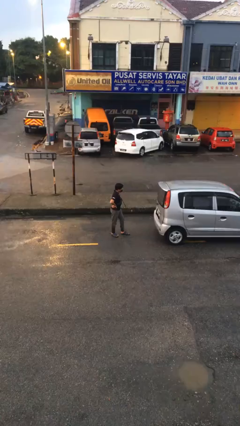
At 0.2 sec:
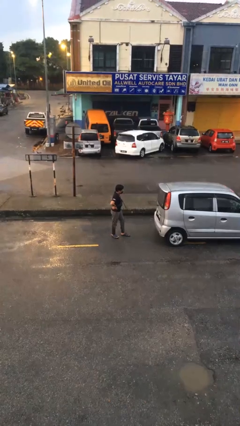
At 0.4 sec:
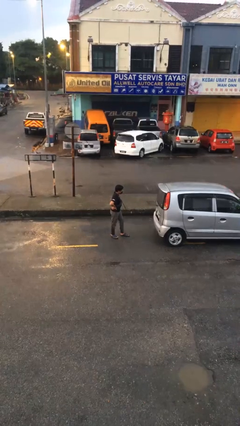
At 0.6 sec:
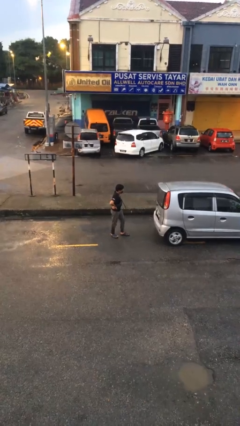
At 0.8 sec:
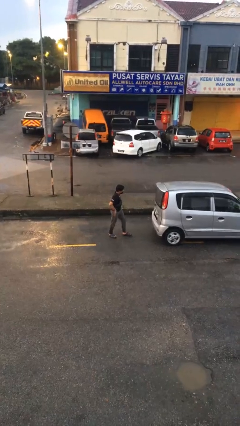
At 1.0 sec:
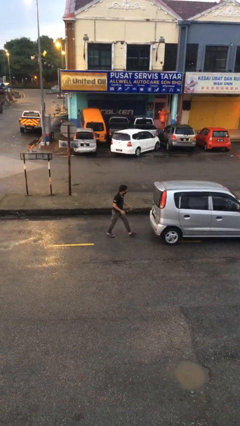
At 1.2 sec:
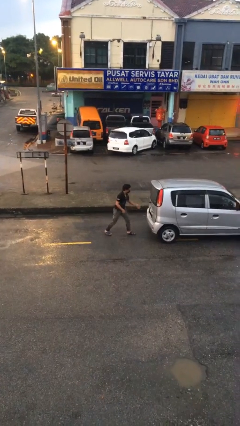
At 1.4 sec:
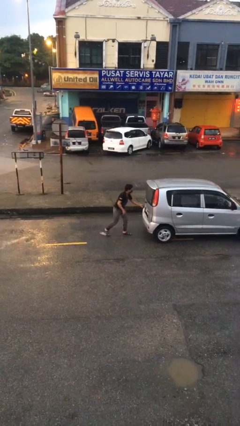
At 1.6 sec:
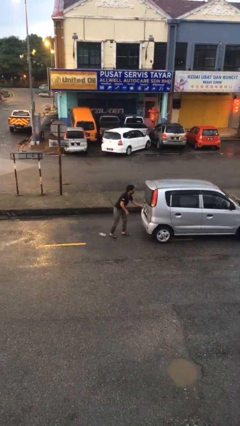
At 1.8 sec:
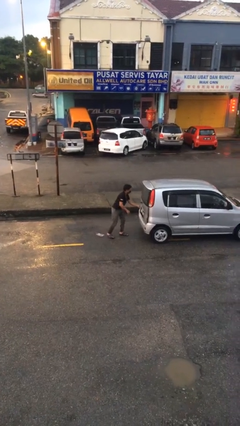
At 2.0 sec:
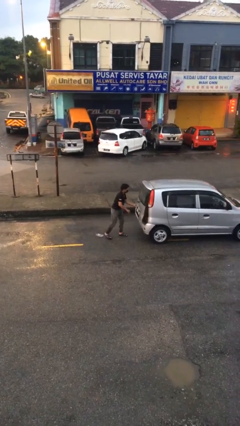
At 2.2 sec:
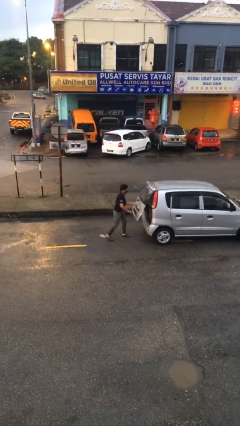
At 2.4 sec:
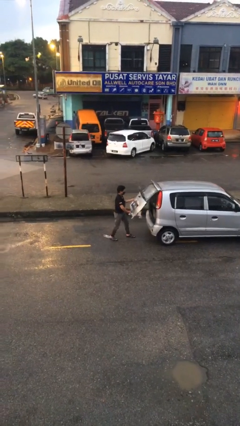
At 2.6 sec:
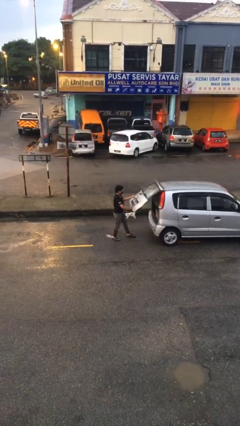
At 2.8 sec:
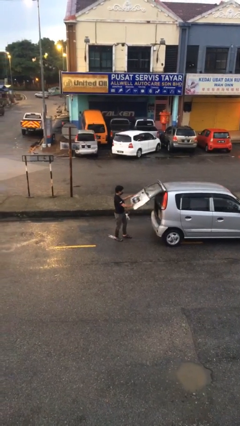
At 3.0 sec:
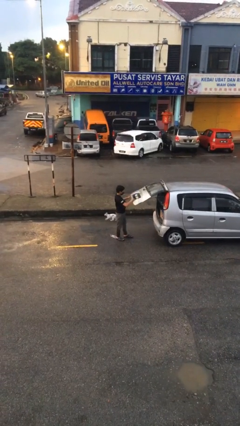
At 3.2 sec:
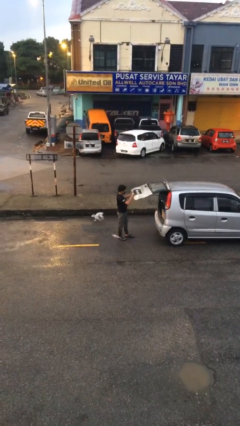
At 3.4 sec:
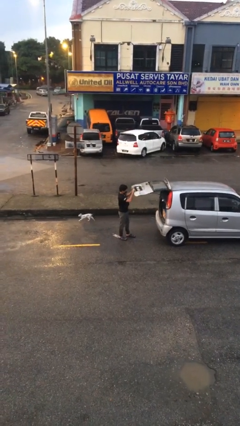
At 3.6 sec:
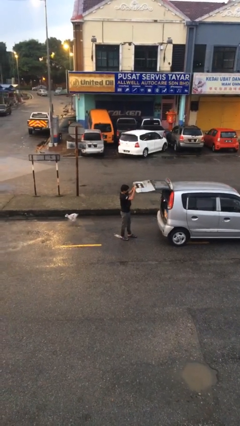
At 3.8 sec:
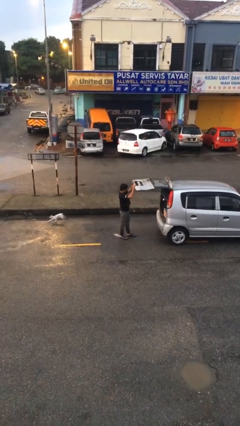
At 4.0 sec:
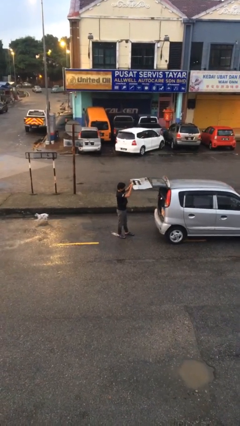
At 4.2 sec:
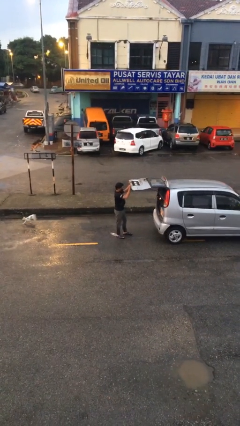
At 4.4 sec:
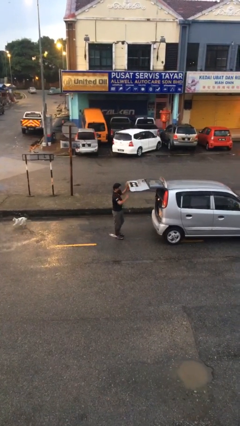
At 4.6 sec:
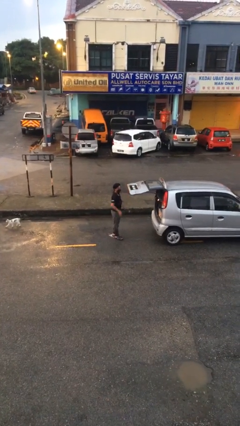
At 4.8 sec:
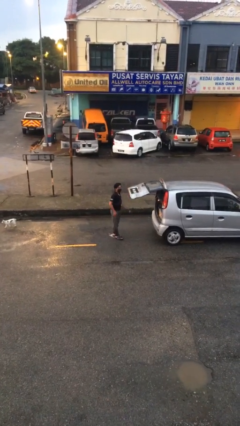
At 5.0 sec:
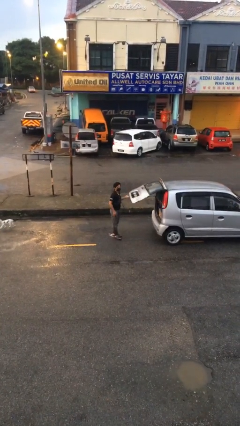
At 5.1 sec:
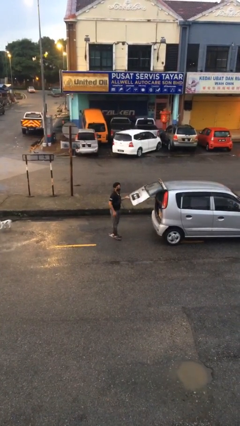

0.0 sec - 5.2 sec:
person opens car trunk

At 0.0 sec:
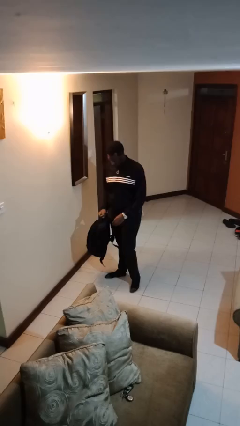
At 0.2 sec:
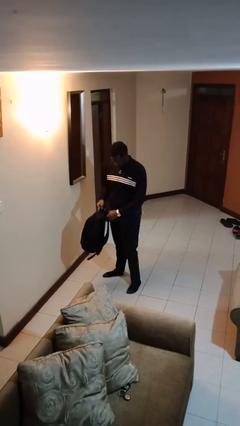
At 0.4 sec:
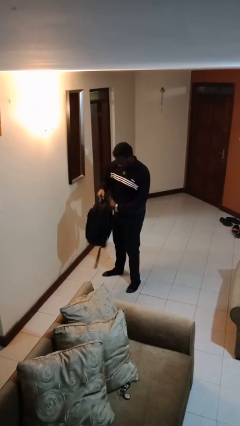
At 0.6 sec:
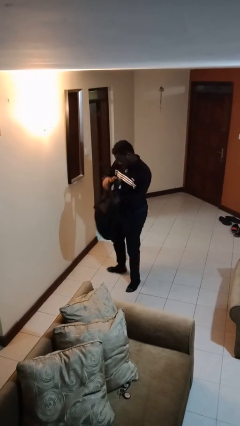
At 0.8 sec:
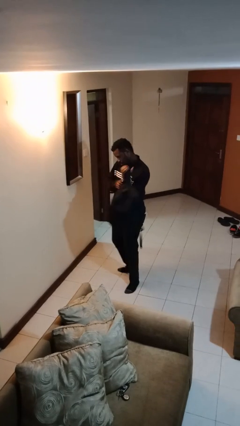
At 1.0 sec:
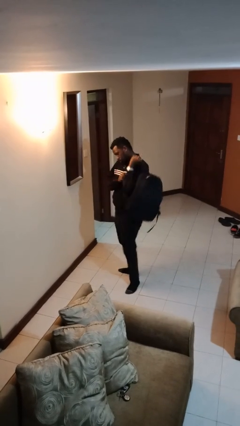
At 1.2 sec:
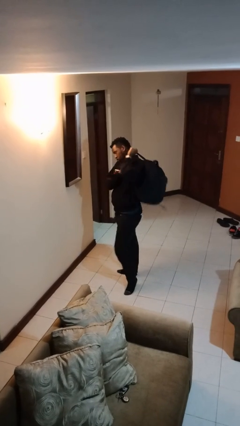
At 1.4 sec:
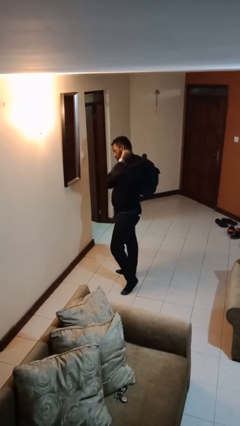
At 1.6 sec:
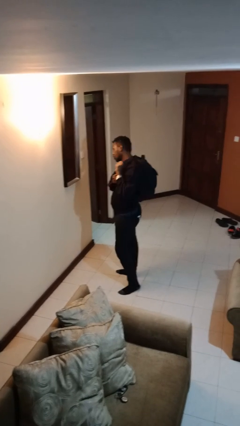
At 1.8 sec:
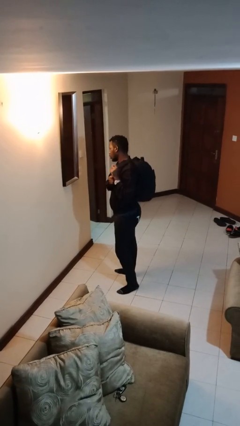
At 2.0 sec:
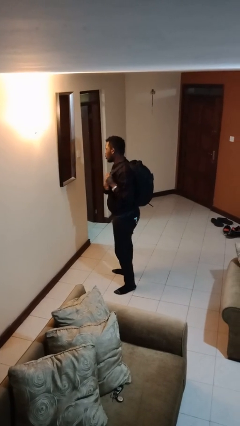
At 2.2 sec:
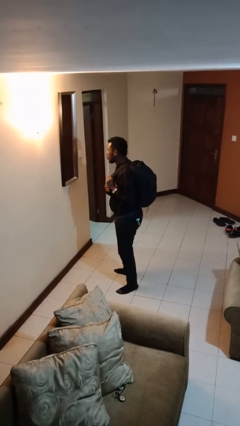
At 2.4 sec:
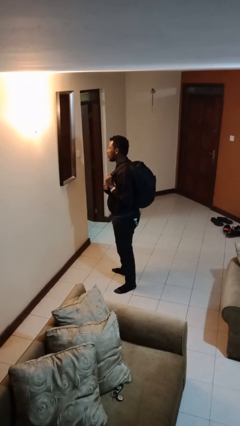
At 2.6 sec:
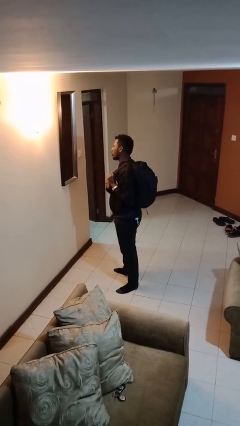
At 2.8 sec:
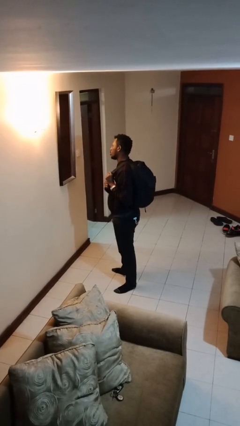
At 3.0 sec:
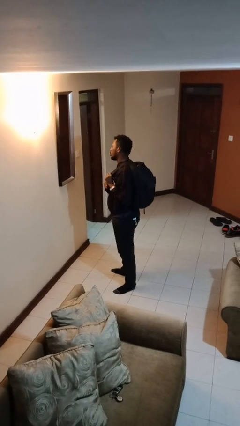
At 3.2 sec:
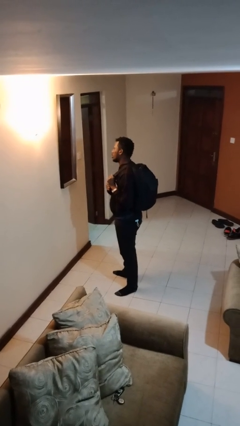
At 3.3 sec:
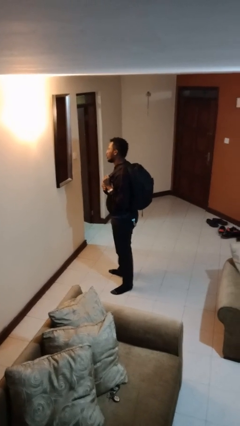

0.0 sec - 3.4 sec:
person puts on backpack

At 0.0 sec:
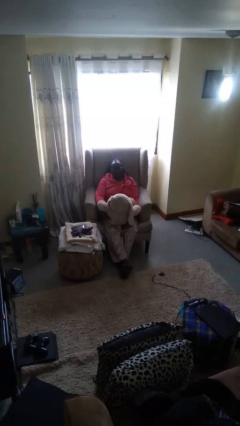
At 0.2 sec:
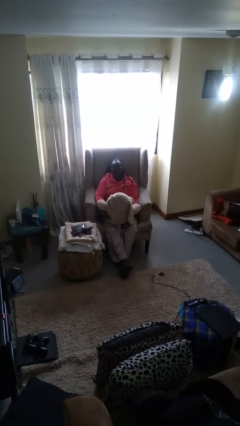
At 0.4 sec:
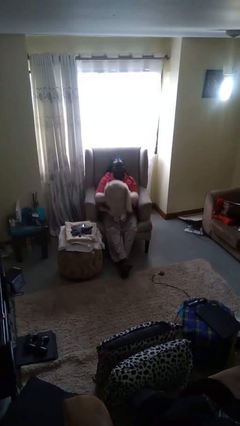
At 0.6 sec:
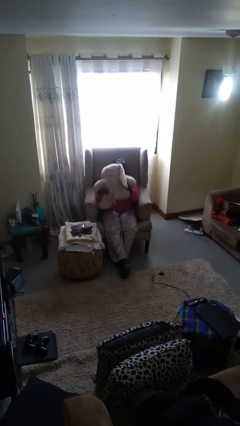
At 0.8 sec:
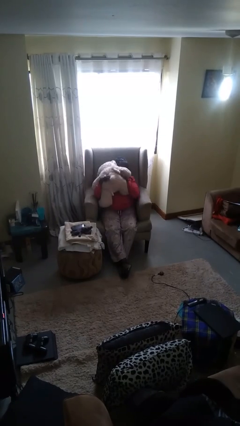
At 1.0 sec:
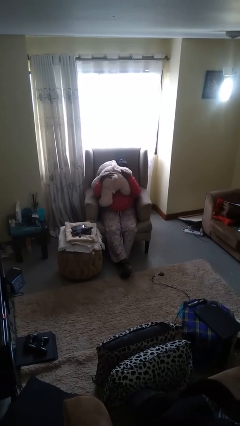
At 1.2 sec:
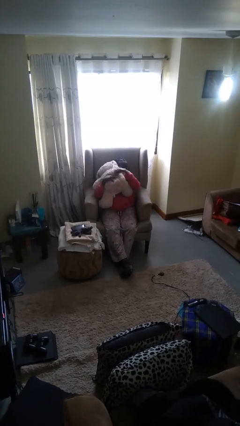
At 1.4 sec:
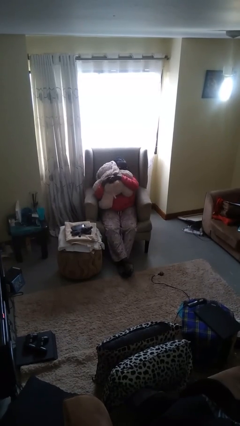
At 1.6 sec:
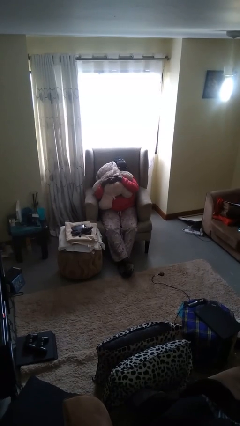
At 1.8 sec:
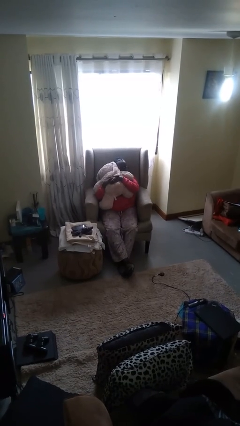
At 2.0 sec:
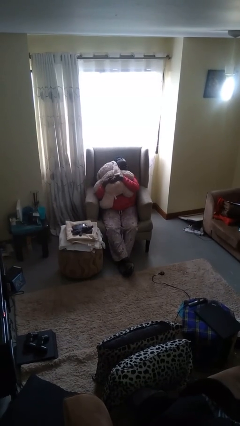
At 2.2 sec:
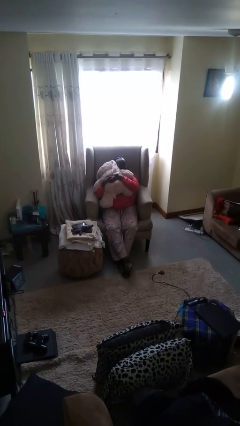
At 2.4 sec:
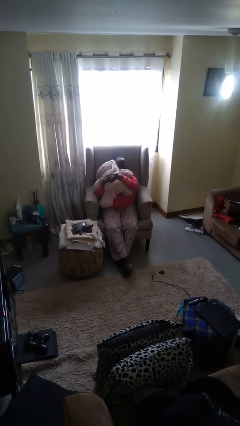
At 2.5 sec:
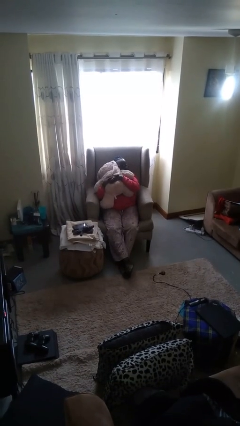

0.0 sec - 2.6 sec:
person hugs stuffed animal

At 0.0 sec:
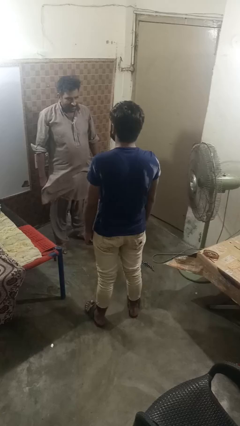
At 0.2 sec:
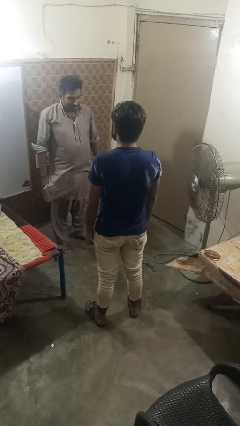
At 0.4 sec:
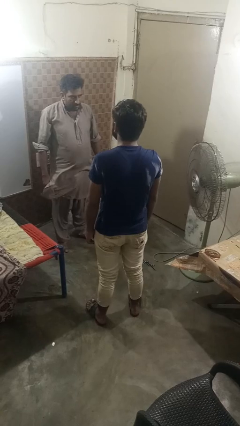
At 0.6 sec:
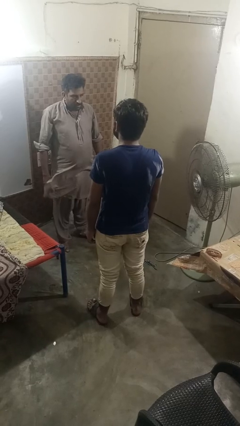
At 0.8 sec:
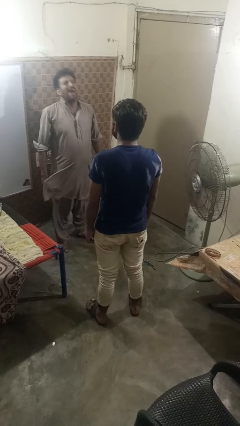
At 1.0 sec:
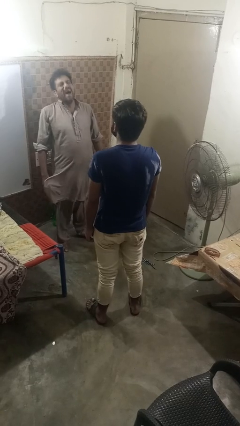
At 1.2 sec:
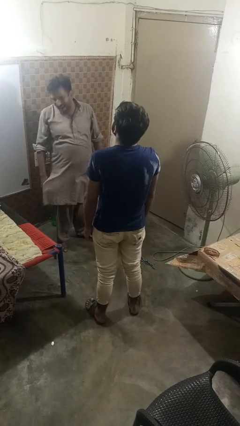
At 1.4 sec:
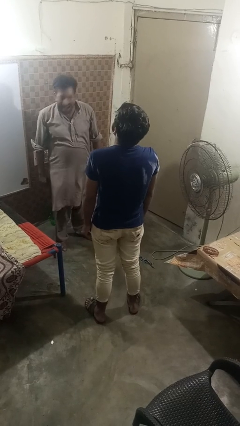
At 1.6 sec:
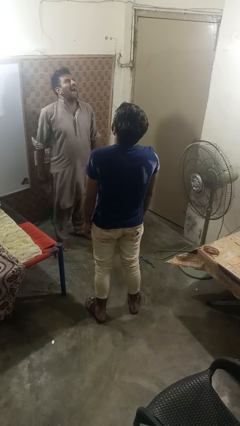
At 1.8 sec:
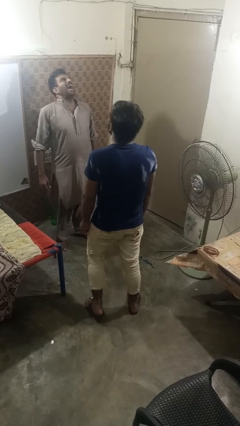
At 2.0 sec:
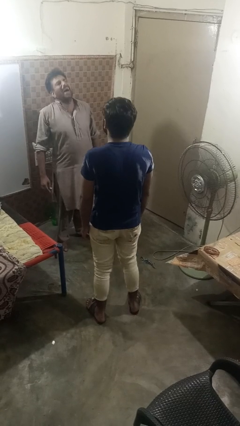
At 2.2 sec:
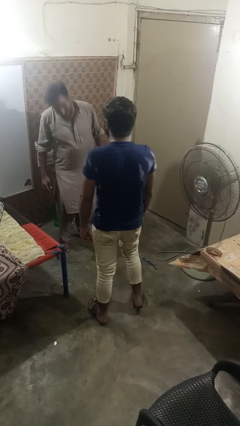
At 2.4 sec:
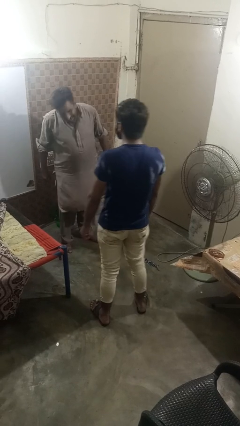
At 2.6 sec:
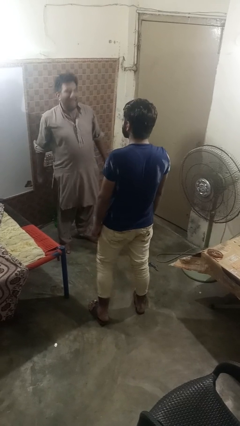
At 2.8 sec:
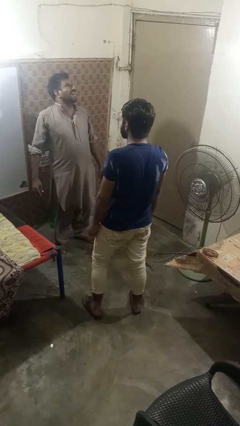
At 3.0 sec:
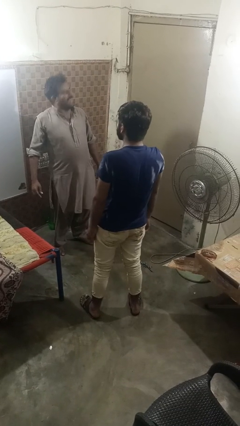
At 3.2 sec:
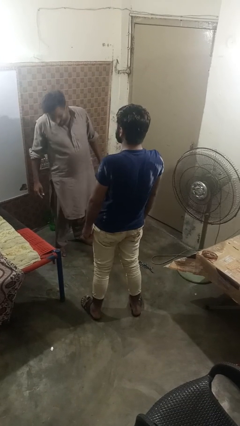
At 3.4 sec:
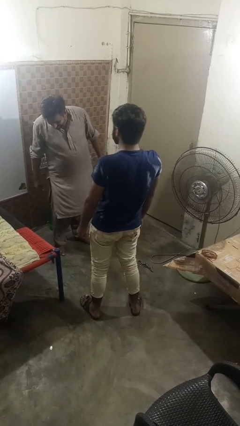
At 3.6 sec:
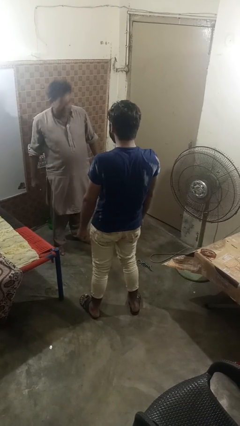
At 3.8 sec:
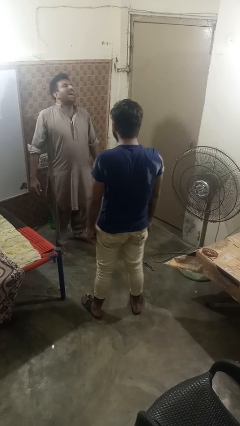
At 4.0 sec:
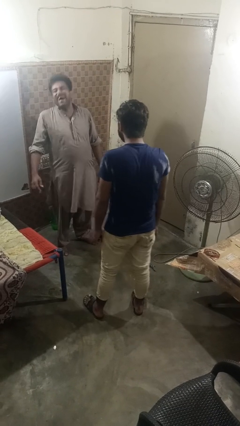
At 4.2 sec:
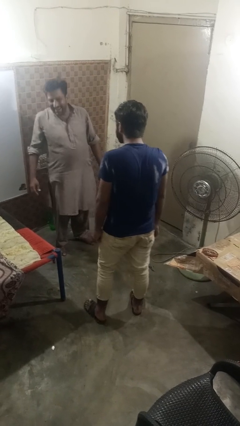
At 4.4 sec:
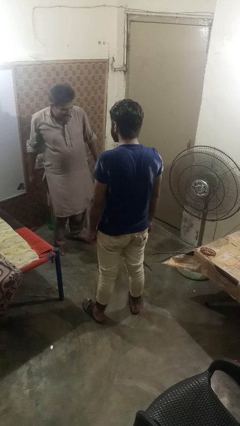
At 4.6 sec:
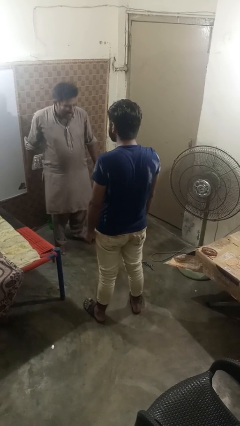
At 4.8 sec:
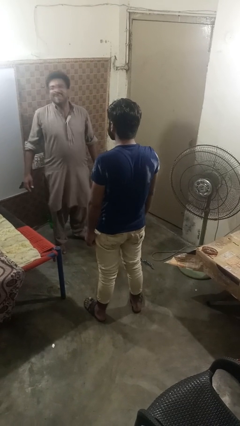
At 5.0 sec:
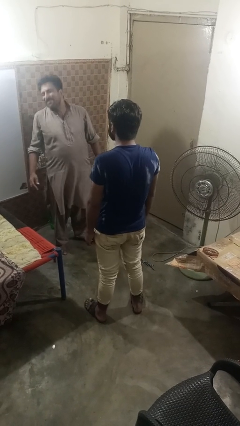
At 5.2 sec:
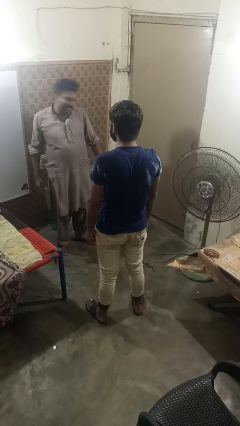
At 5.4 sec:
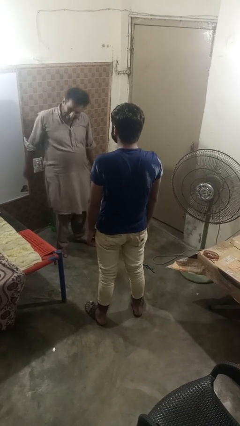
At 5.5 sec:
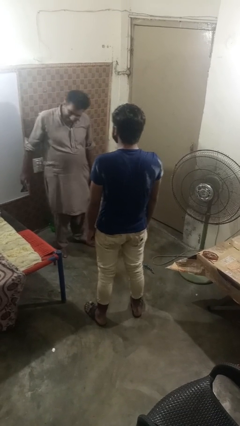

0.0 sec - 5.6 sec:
person laughs with person

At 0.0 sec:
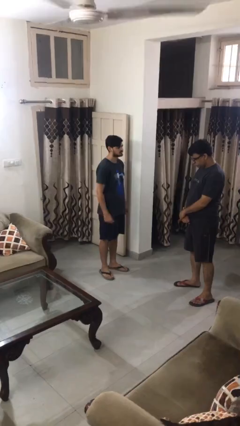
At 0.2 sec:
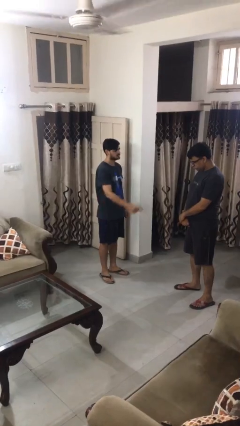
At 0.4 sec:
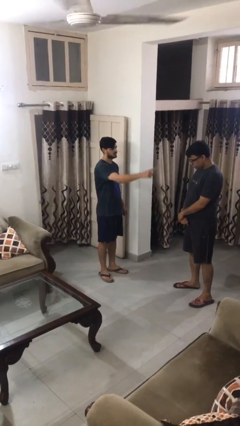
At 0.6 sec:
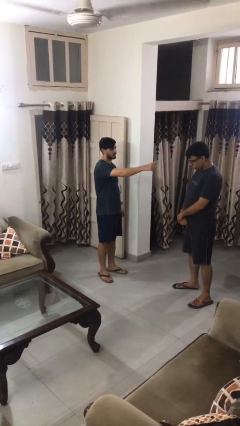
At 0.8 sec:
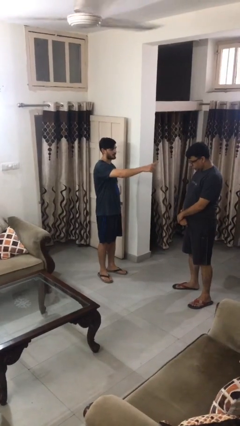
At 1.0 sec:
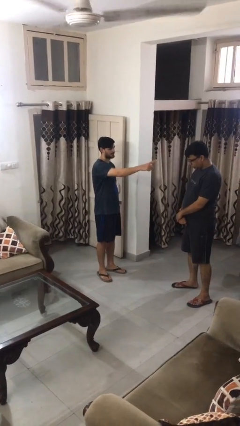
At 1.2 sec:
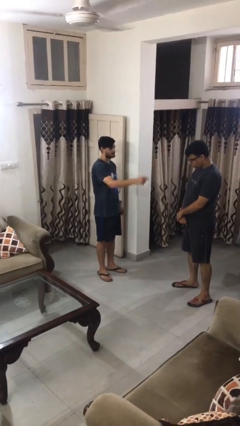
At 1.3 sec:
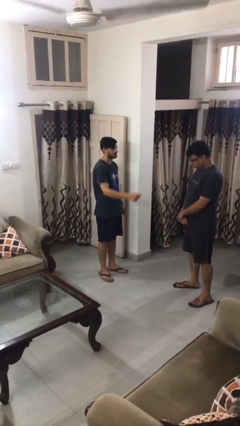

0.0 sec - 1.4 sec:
person points at person
